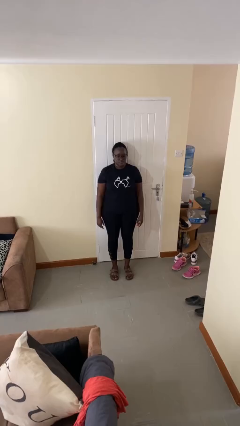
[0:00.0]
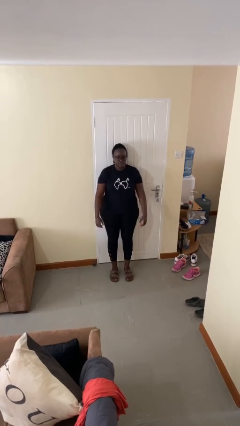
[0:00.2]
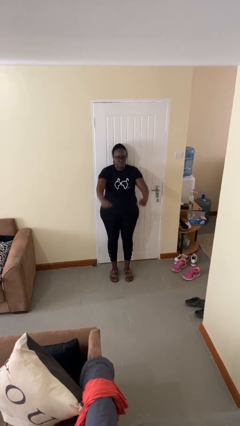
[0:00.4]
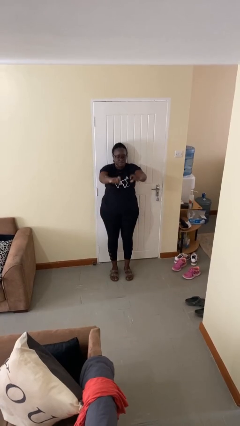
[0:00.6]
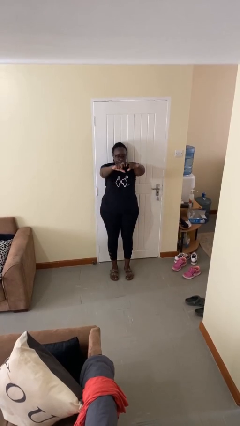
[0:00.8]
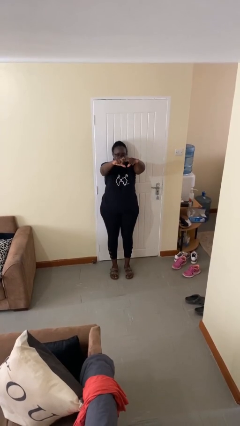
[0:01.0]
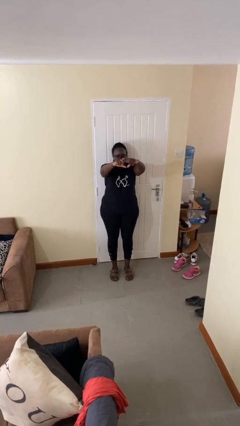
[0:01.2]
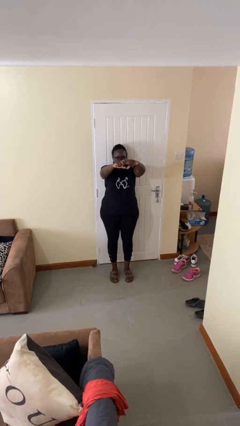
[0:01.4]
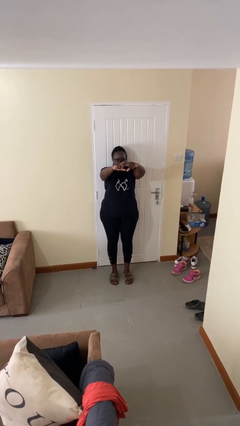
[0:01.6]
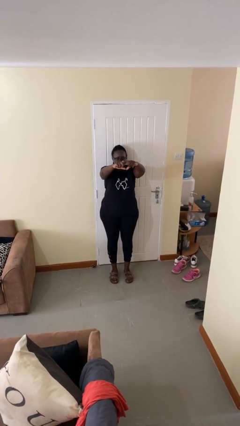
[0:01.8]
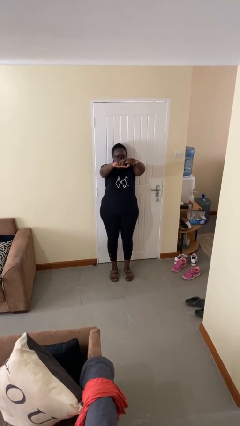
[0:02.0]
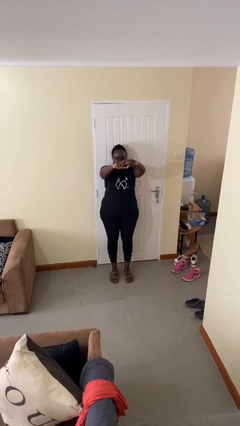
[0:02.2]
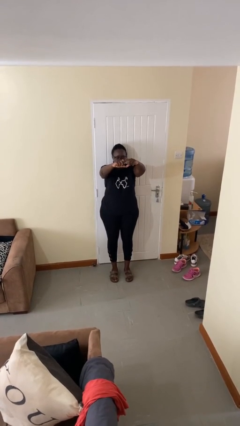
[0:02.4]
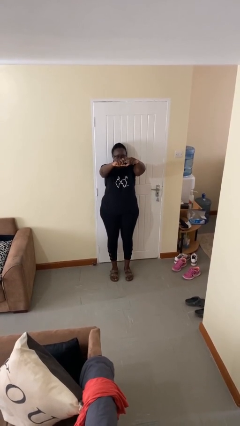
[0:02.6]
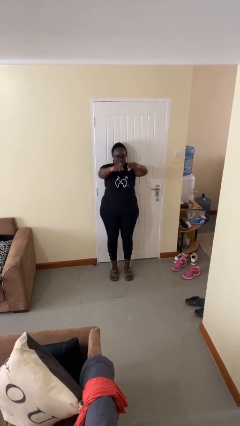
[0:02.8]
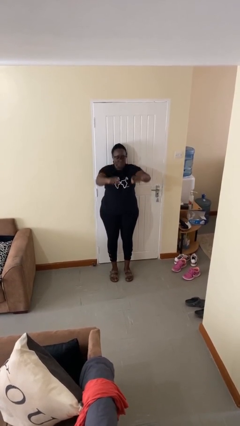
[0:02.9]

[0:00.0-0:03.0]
person gestures heart

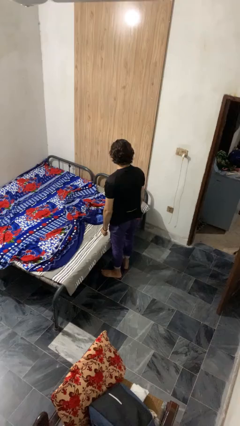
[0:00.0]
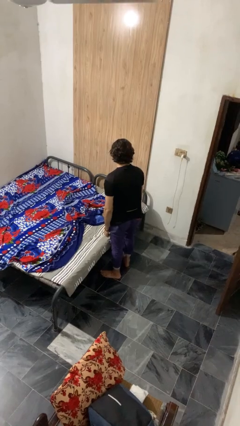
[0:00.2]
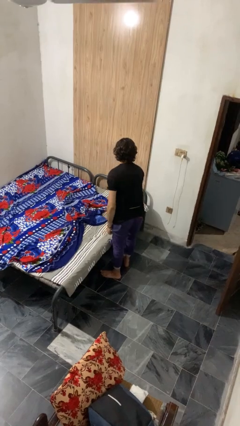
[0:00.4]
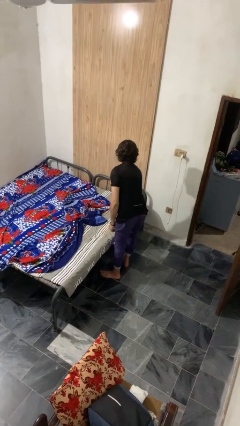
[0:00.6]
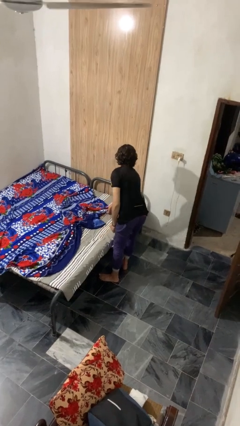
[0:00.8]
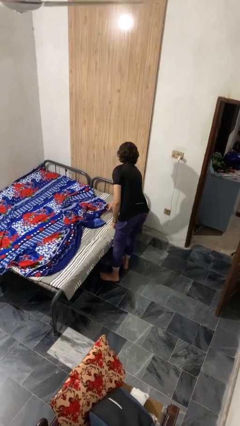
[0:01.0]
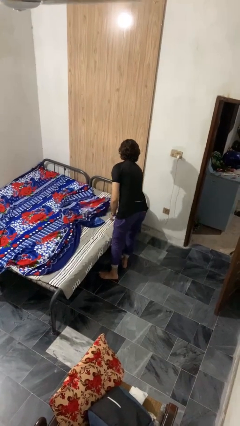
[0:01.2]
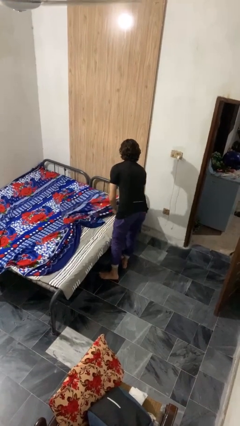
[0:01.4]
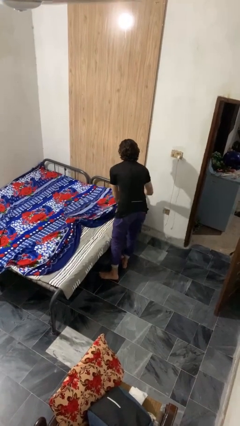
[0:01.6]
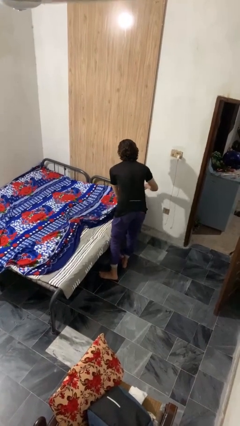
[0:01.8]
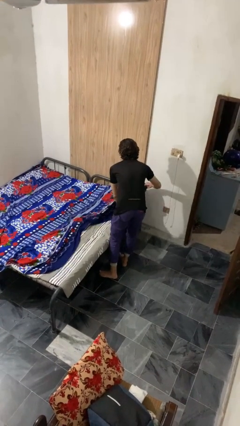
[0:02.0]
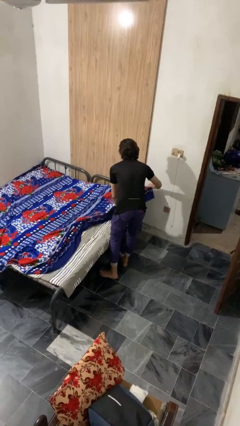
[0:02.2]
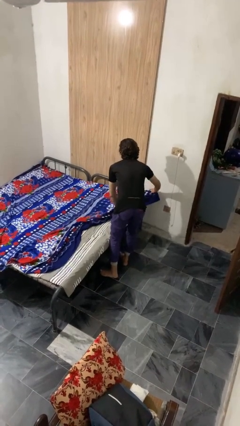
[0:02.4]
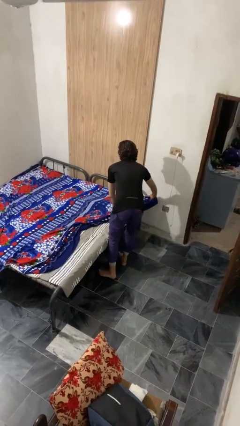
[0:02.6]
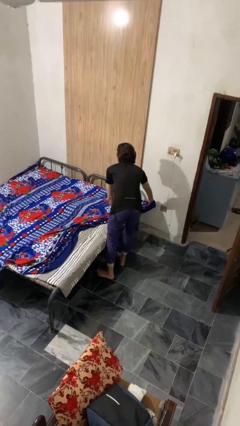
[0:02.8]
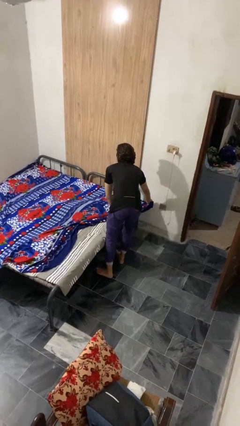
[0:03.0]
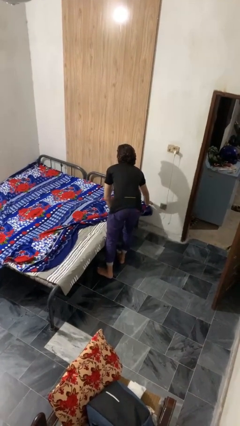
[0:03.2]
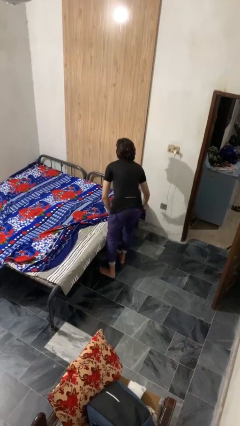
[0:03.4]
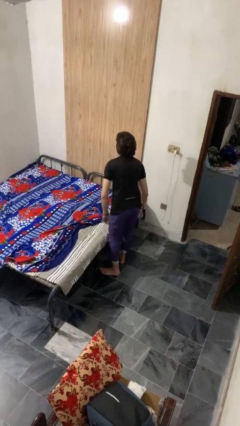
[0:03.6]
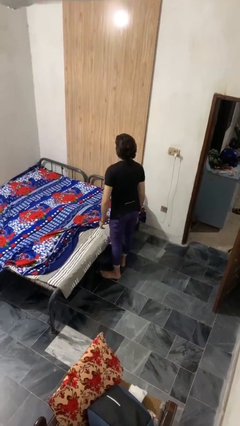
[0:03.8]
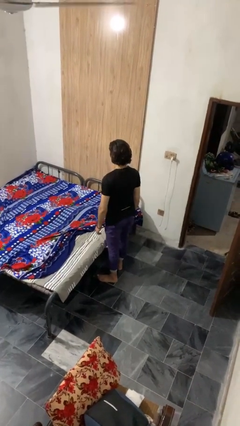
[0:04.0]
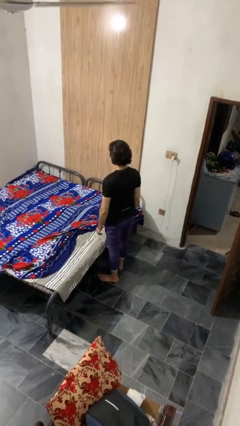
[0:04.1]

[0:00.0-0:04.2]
person makes bed

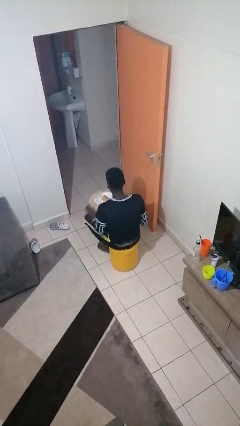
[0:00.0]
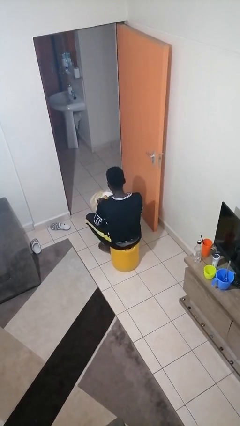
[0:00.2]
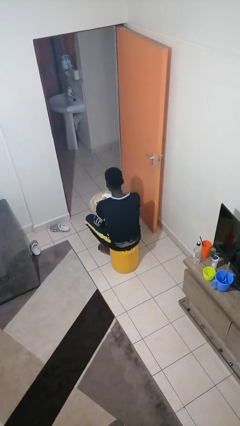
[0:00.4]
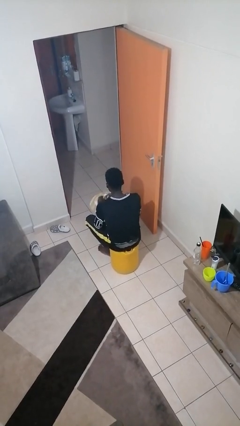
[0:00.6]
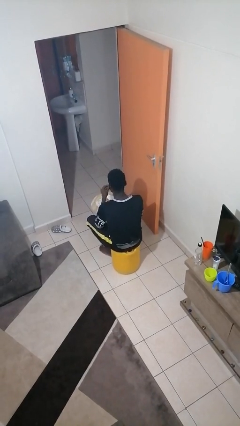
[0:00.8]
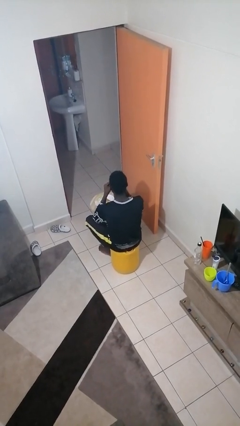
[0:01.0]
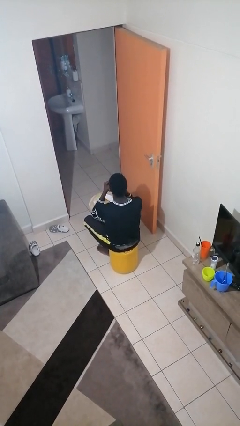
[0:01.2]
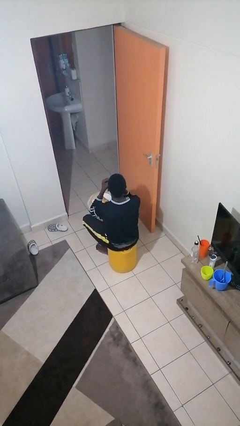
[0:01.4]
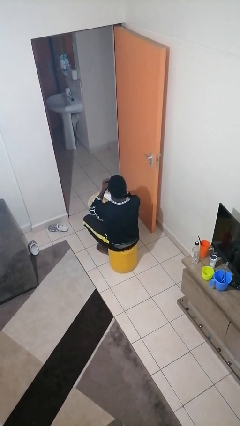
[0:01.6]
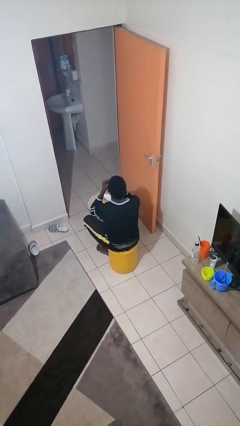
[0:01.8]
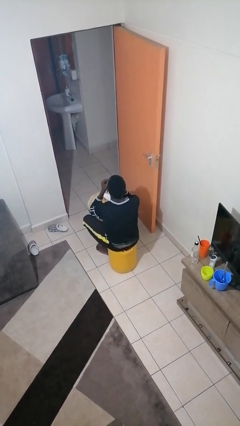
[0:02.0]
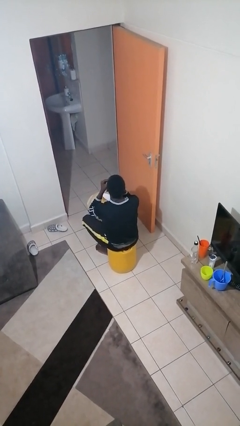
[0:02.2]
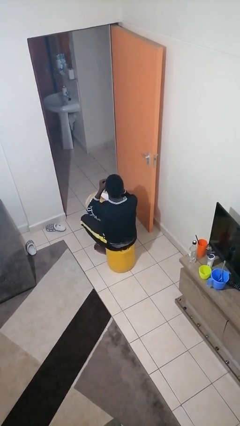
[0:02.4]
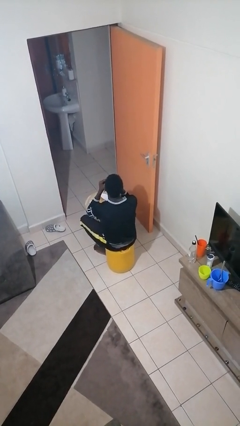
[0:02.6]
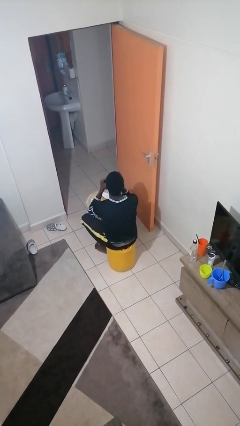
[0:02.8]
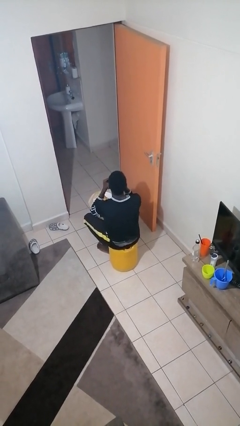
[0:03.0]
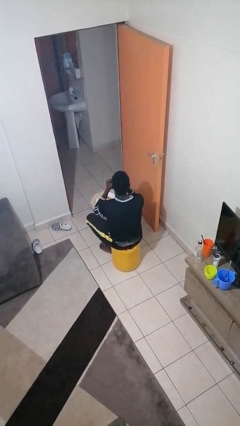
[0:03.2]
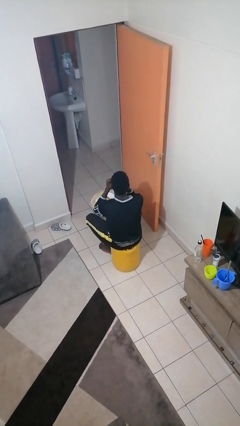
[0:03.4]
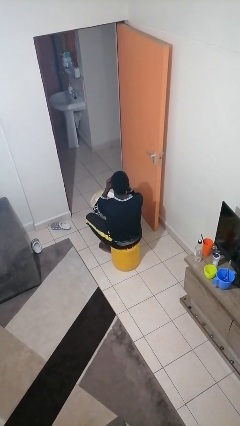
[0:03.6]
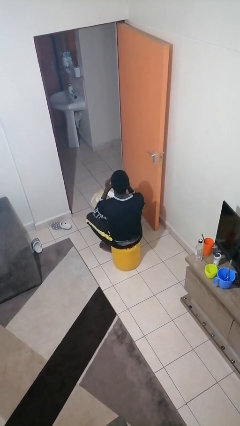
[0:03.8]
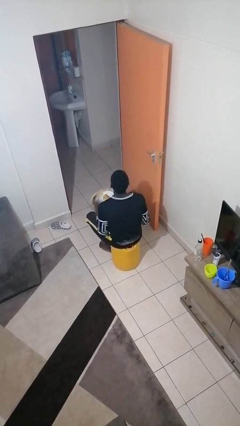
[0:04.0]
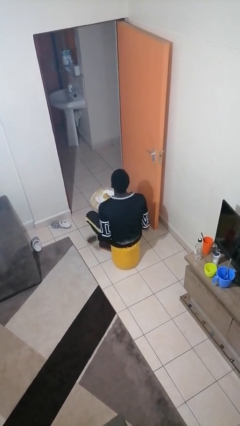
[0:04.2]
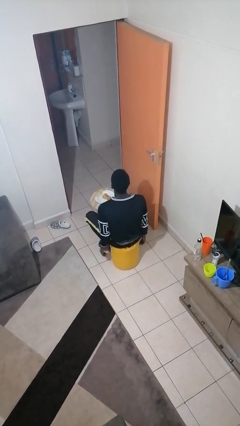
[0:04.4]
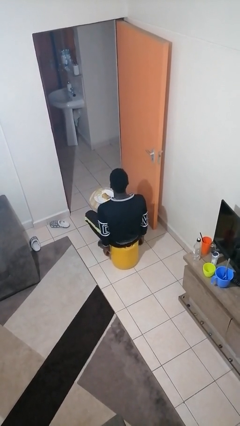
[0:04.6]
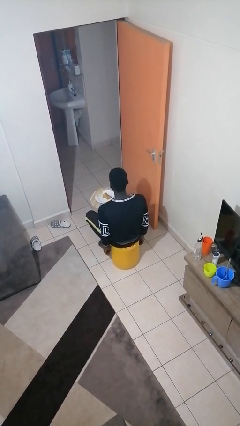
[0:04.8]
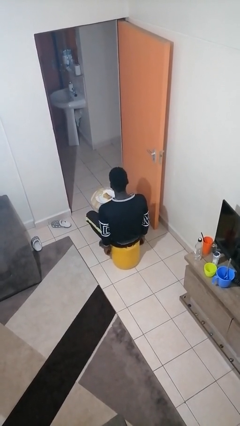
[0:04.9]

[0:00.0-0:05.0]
person eats with hands

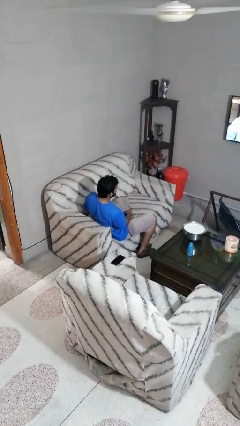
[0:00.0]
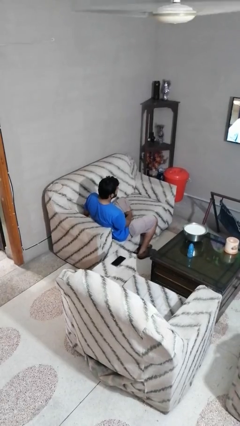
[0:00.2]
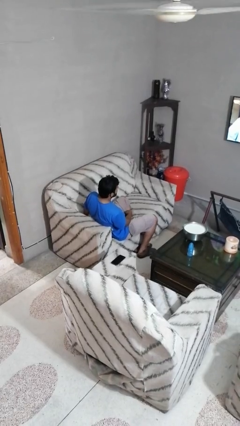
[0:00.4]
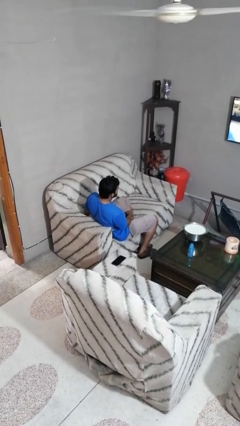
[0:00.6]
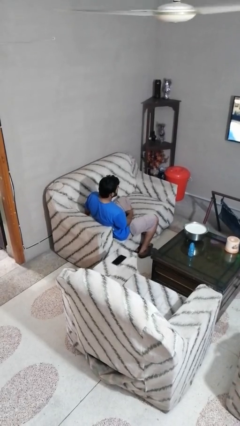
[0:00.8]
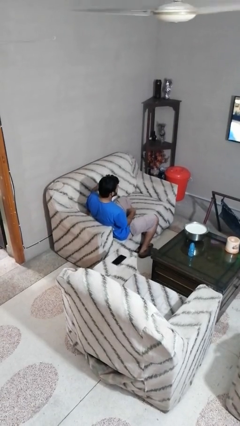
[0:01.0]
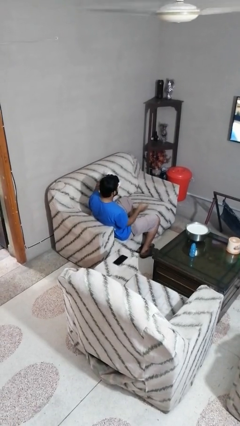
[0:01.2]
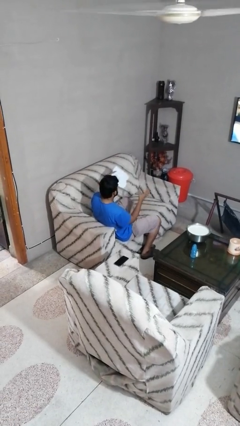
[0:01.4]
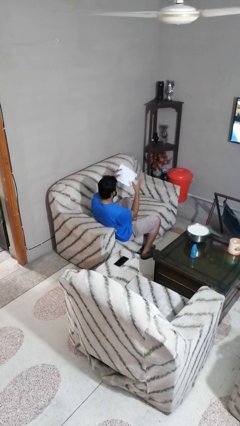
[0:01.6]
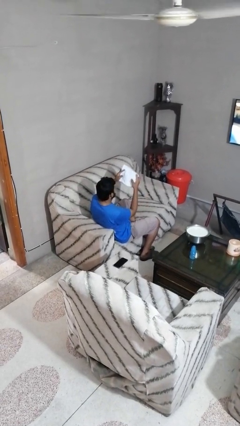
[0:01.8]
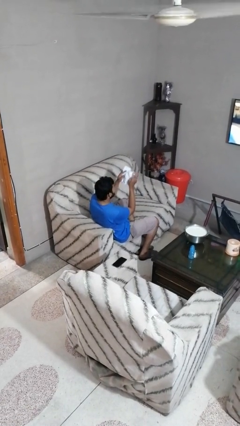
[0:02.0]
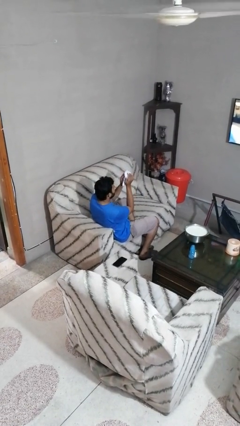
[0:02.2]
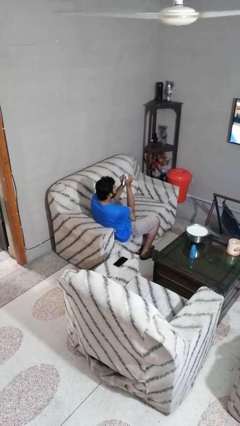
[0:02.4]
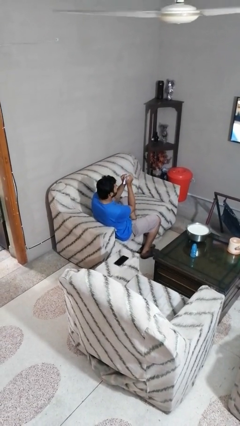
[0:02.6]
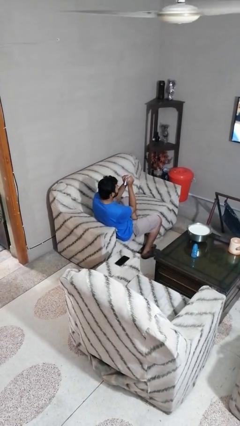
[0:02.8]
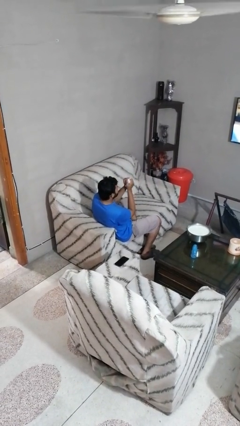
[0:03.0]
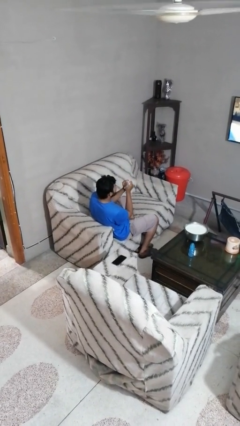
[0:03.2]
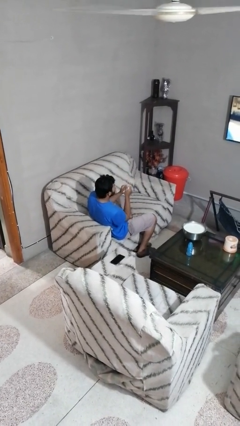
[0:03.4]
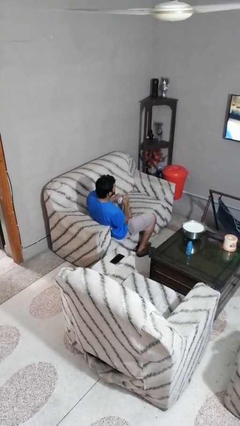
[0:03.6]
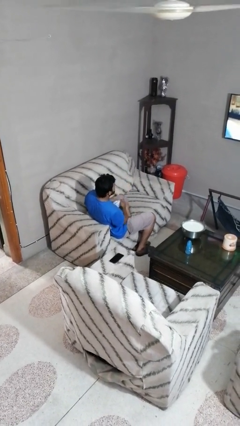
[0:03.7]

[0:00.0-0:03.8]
person crumples paper

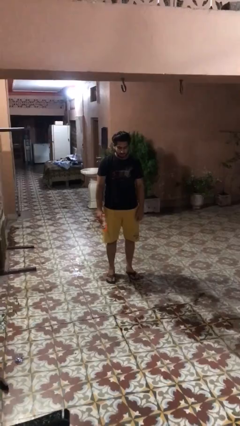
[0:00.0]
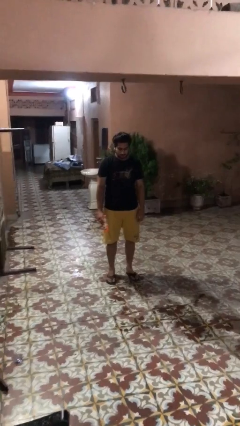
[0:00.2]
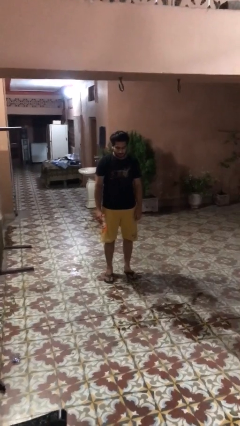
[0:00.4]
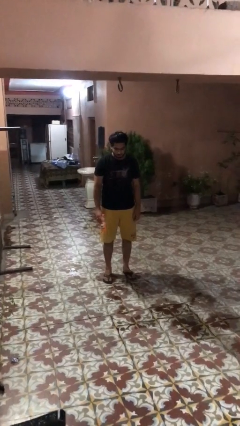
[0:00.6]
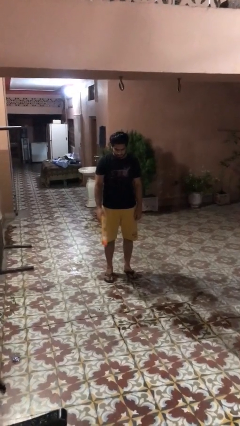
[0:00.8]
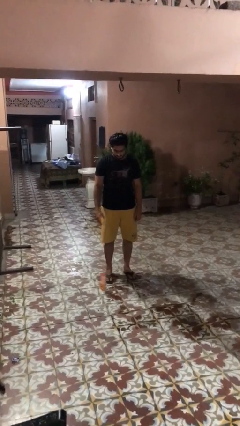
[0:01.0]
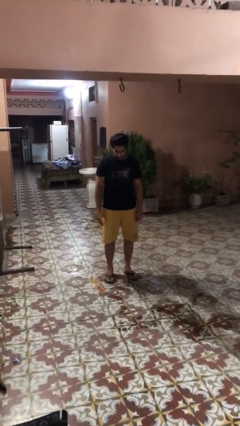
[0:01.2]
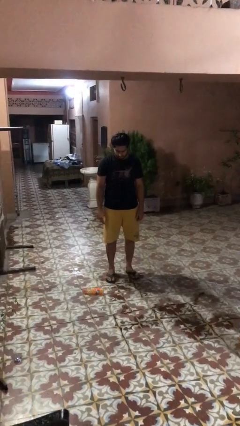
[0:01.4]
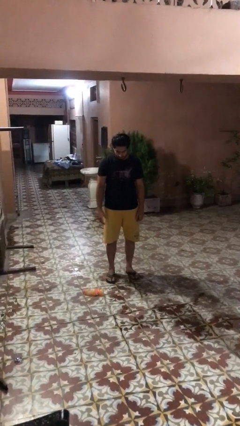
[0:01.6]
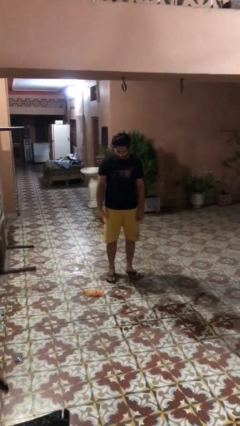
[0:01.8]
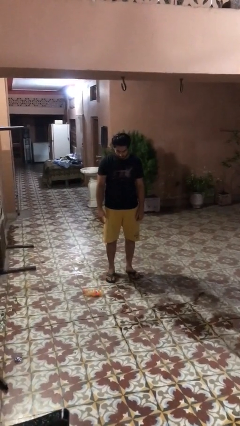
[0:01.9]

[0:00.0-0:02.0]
person throws object into air
